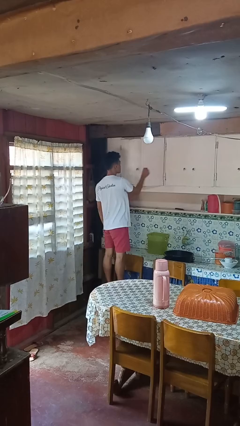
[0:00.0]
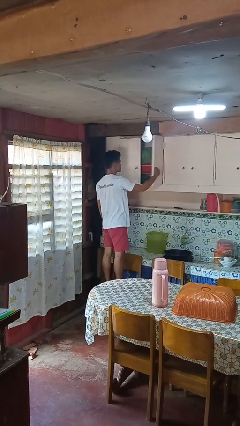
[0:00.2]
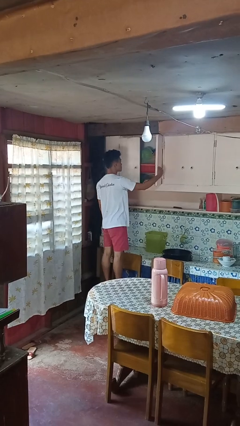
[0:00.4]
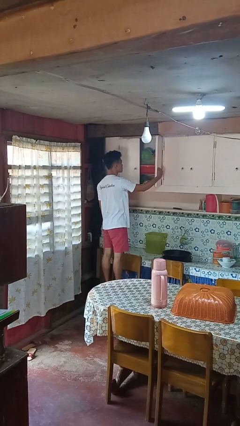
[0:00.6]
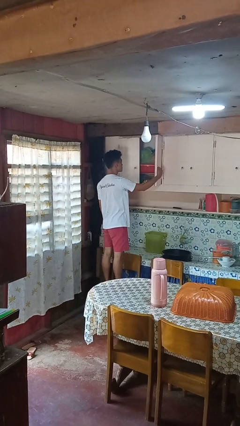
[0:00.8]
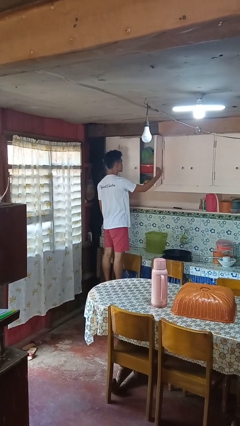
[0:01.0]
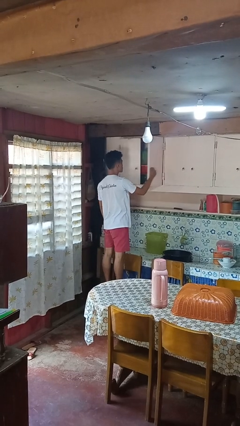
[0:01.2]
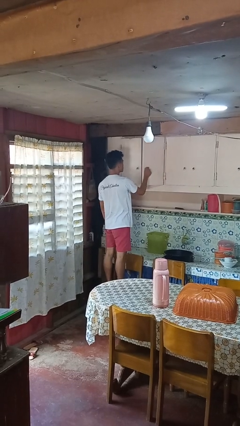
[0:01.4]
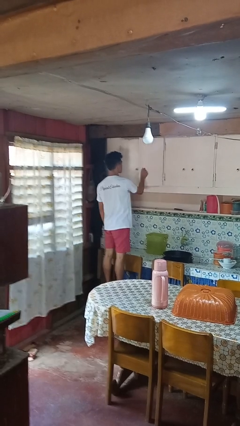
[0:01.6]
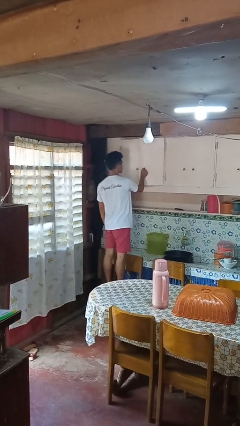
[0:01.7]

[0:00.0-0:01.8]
person opens cabinet

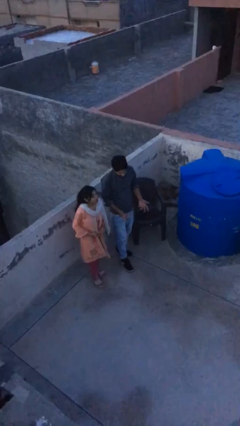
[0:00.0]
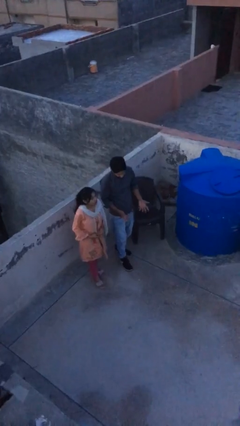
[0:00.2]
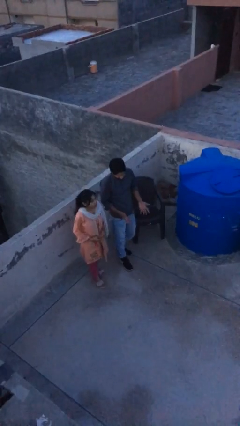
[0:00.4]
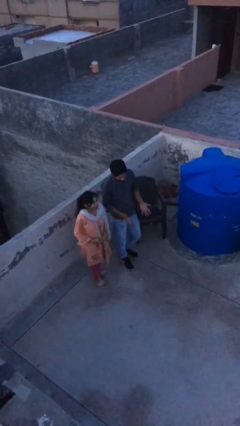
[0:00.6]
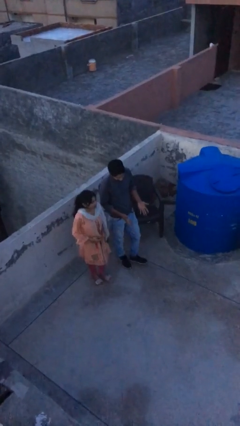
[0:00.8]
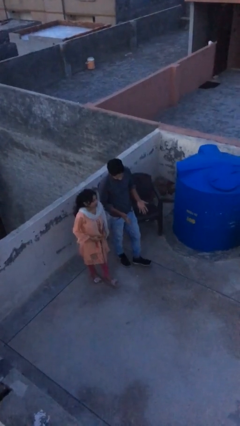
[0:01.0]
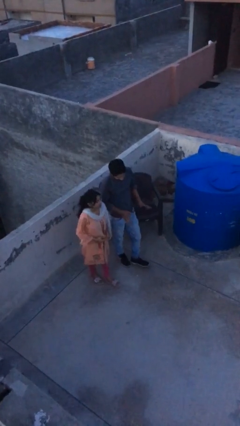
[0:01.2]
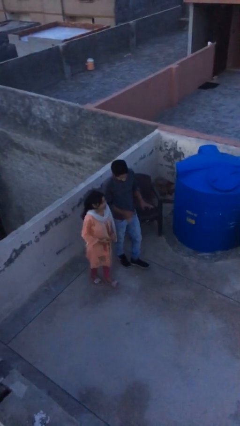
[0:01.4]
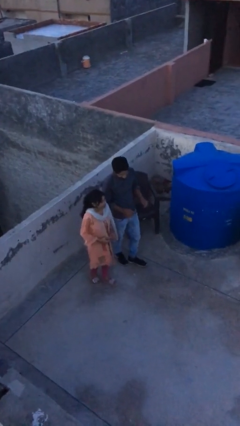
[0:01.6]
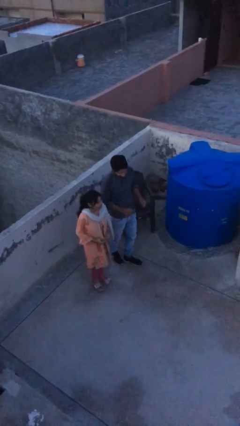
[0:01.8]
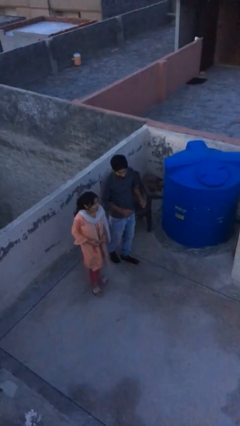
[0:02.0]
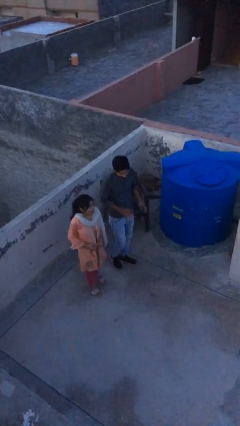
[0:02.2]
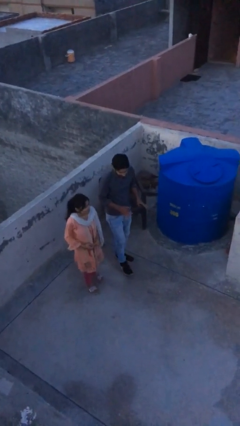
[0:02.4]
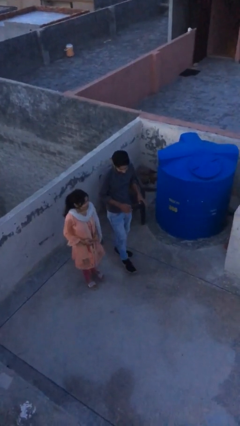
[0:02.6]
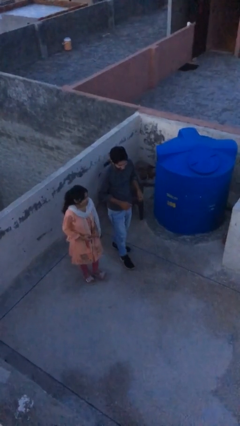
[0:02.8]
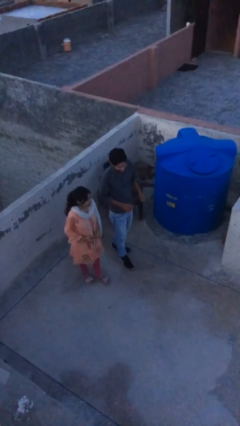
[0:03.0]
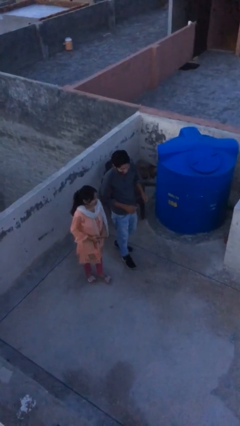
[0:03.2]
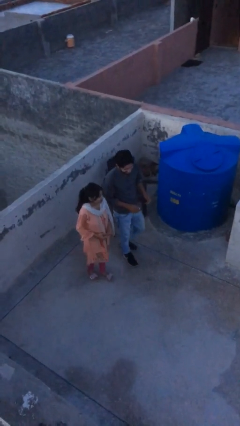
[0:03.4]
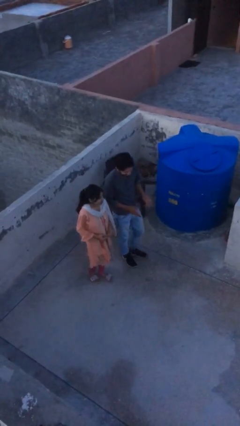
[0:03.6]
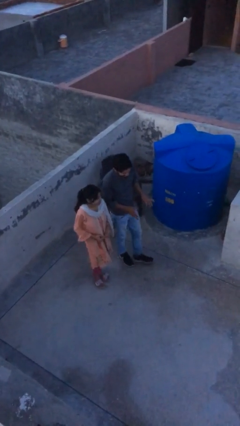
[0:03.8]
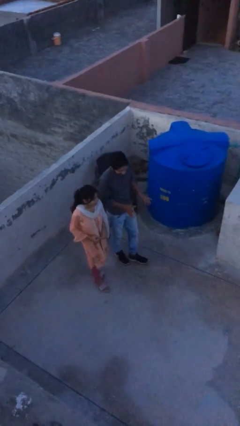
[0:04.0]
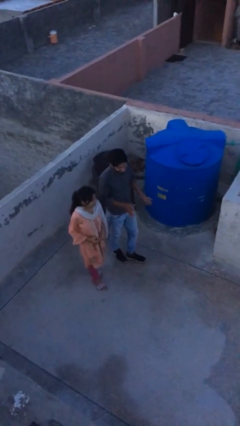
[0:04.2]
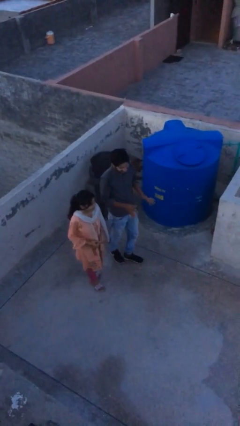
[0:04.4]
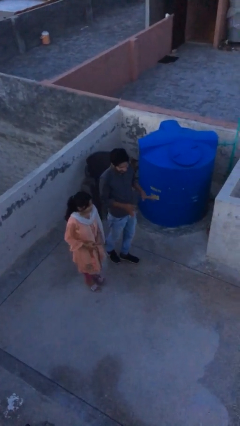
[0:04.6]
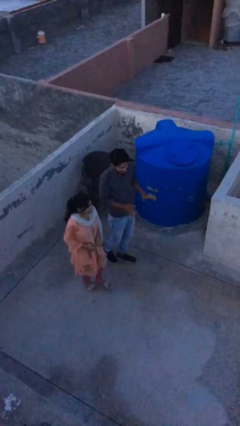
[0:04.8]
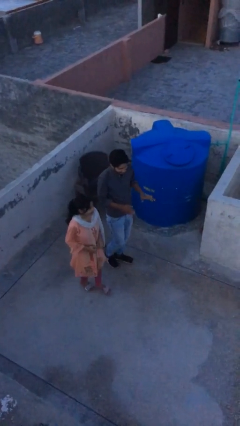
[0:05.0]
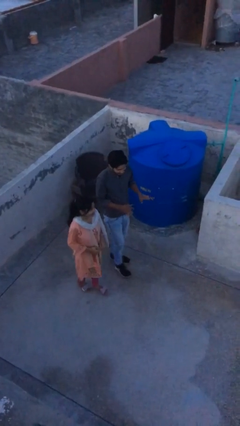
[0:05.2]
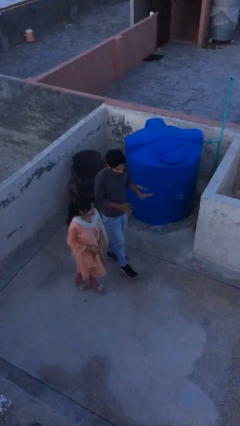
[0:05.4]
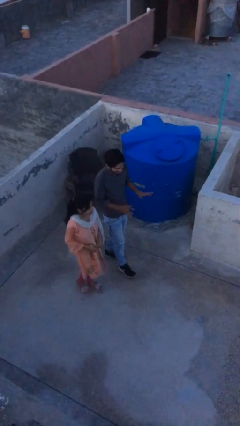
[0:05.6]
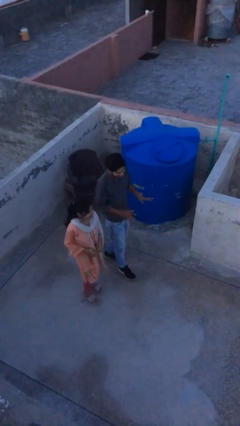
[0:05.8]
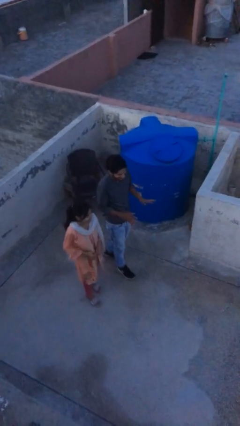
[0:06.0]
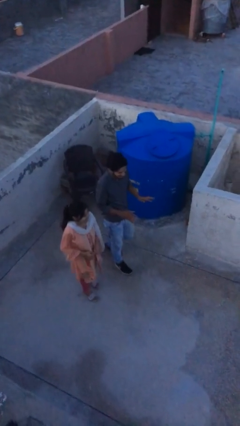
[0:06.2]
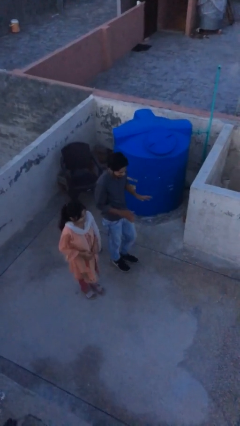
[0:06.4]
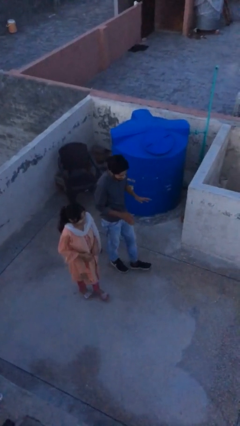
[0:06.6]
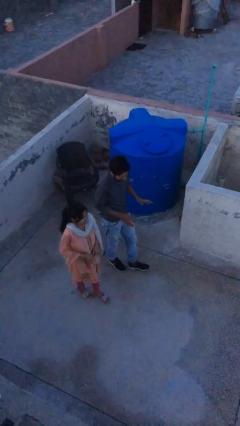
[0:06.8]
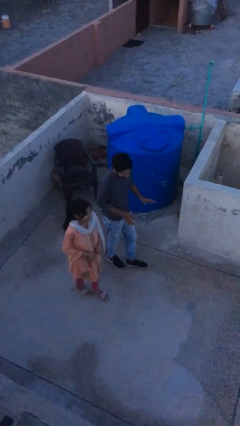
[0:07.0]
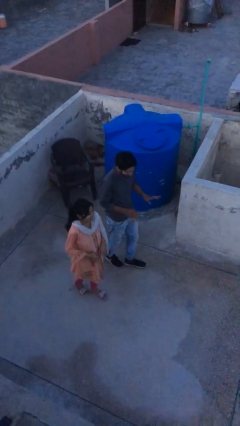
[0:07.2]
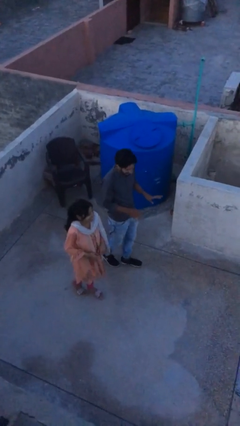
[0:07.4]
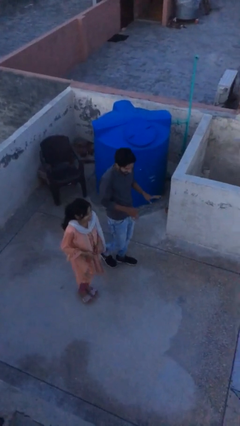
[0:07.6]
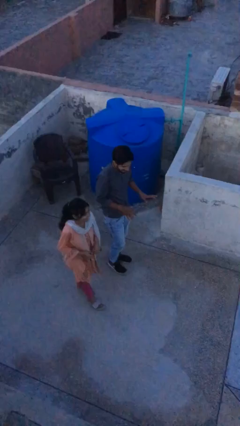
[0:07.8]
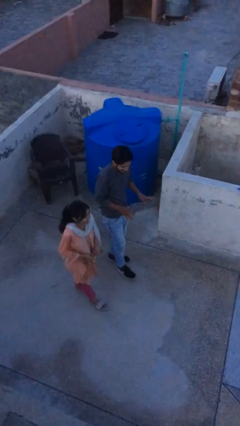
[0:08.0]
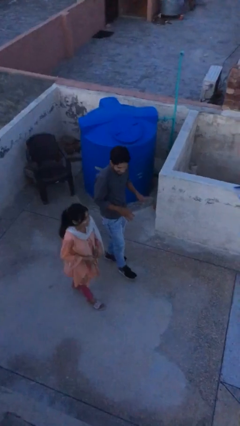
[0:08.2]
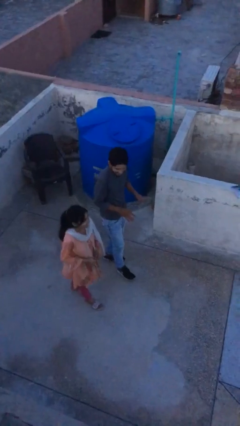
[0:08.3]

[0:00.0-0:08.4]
person talks to person

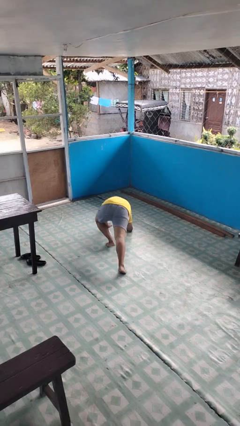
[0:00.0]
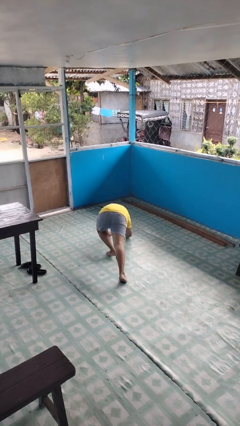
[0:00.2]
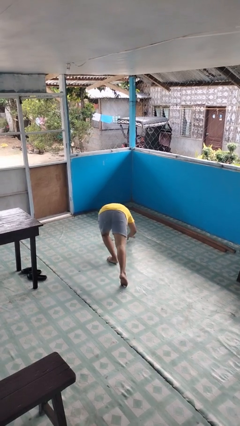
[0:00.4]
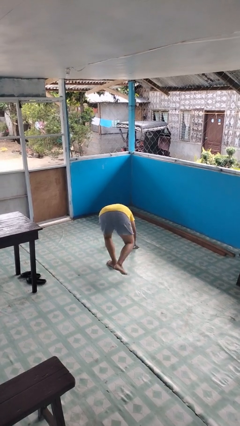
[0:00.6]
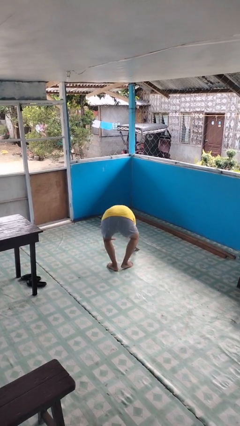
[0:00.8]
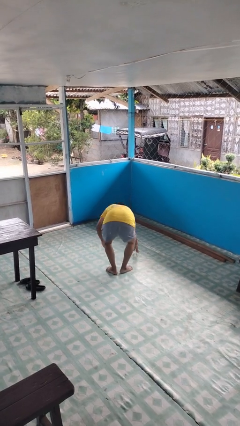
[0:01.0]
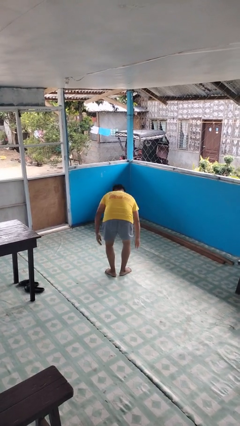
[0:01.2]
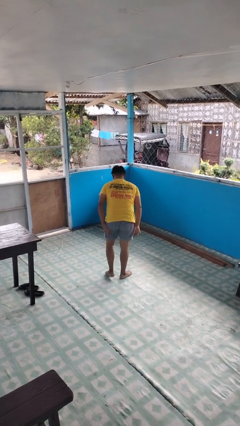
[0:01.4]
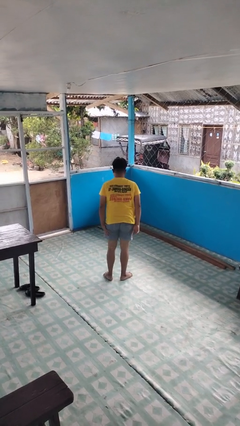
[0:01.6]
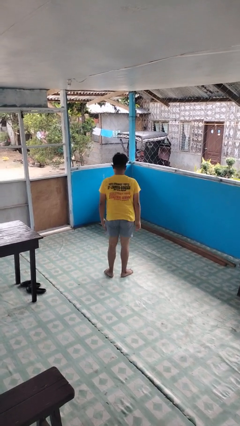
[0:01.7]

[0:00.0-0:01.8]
person stands up from floor

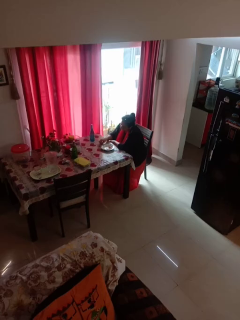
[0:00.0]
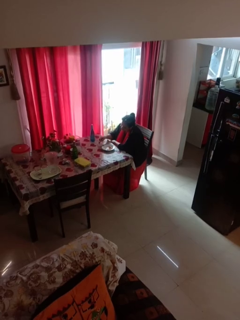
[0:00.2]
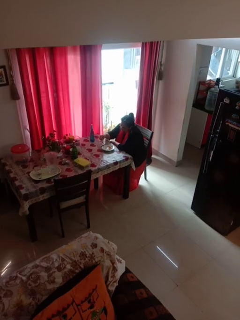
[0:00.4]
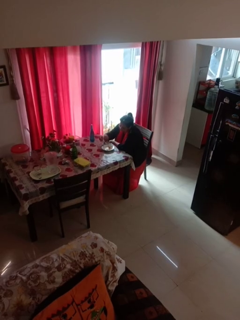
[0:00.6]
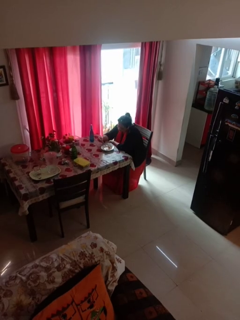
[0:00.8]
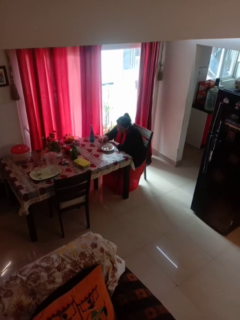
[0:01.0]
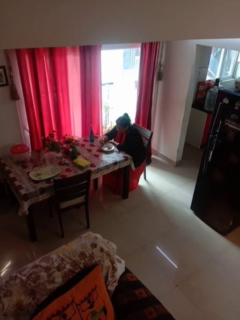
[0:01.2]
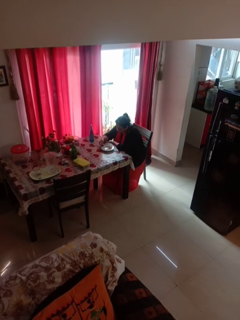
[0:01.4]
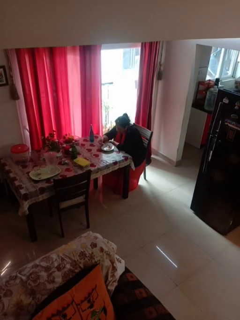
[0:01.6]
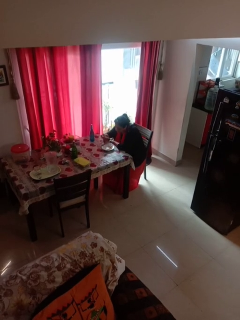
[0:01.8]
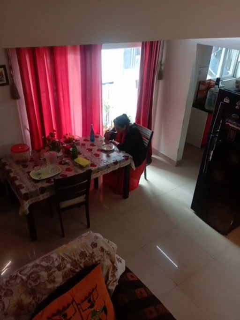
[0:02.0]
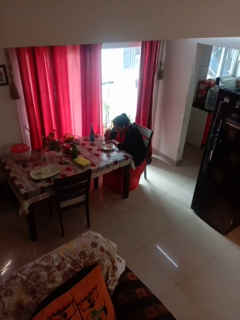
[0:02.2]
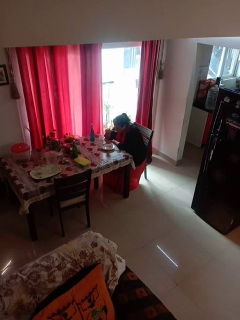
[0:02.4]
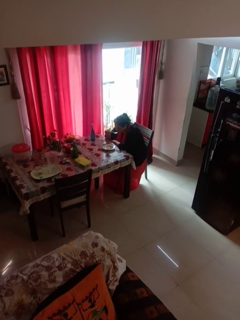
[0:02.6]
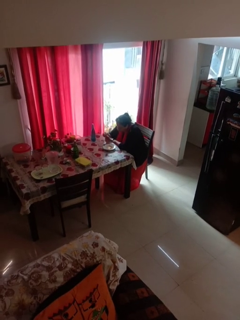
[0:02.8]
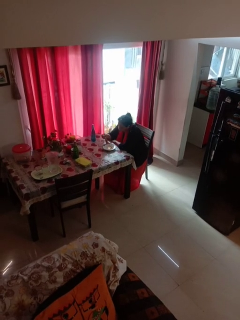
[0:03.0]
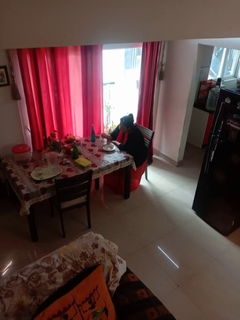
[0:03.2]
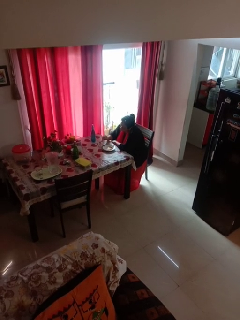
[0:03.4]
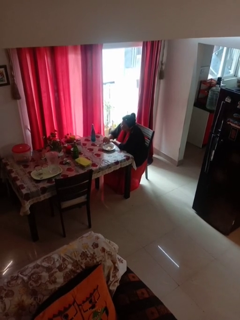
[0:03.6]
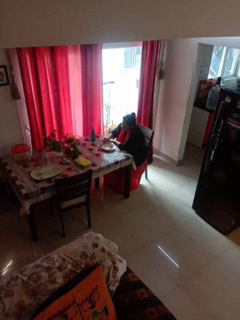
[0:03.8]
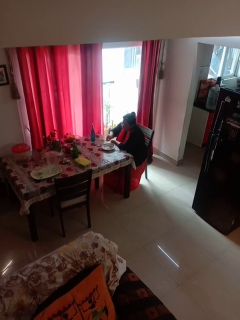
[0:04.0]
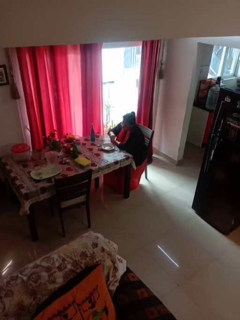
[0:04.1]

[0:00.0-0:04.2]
person eats with utensil

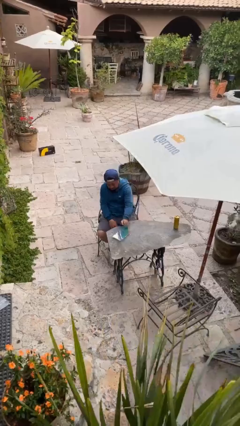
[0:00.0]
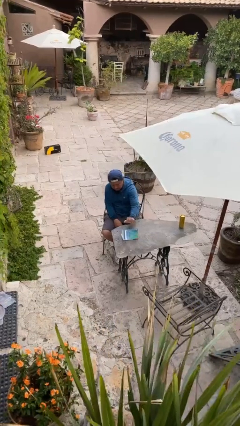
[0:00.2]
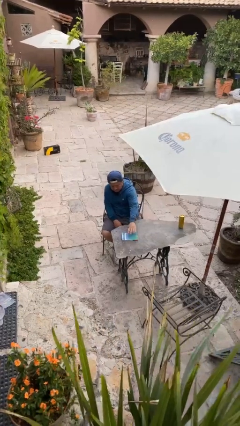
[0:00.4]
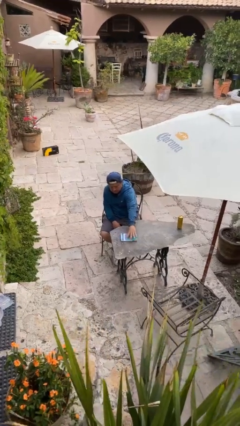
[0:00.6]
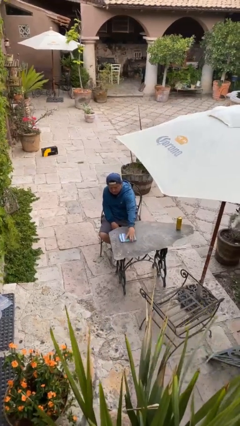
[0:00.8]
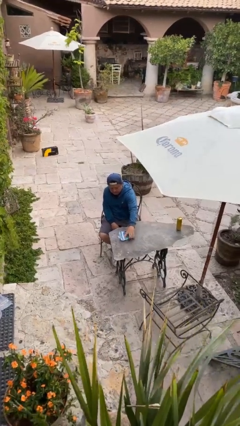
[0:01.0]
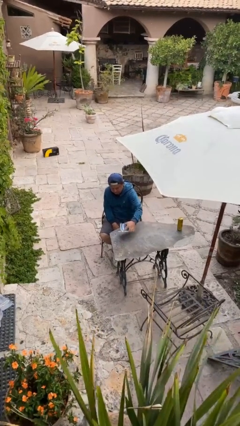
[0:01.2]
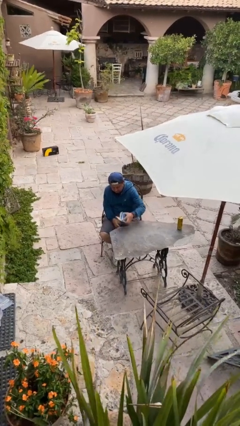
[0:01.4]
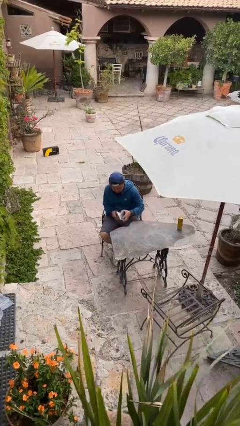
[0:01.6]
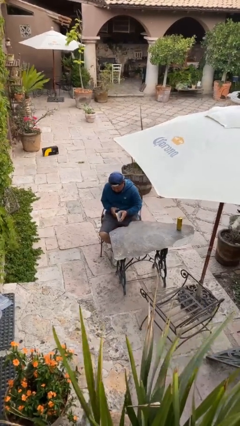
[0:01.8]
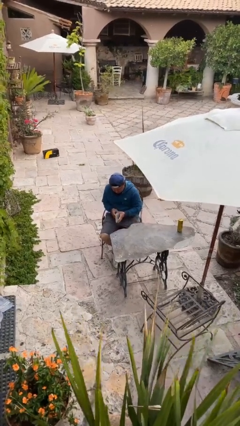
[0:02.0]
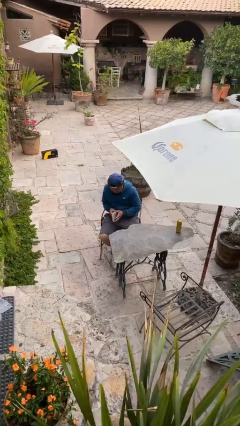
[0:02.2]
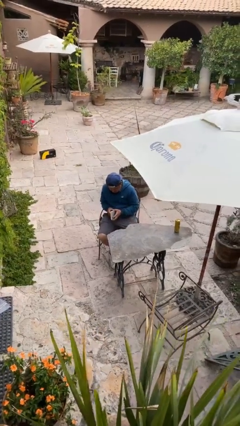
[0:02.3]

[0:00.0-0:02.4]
person picks up object from table

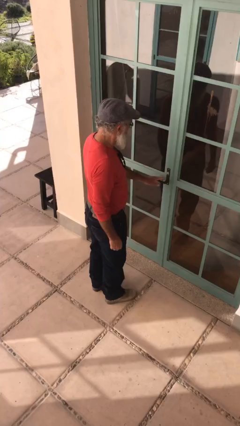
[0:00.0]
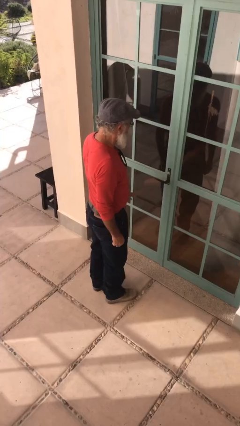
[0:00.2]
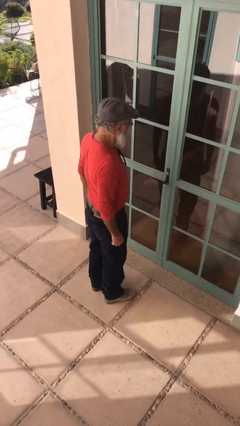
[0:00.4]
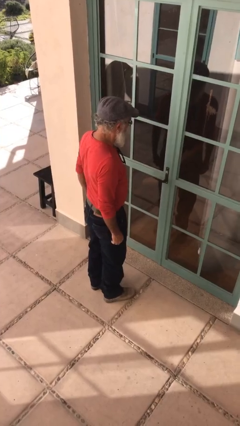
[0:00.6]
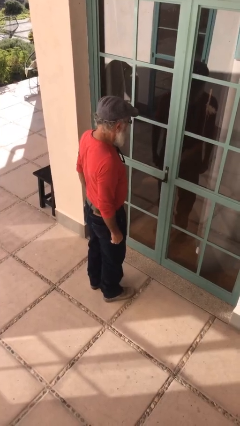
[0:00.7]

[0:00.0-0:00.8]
person closes facility door
